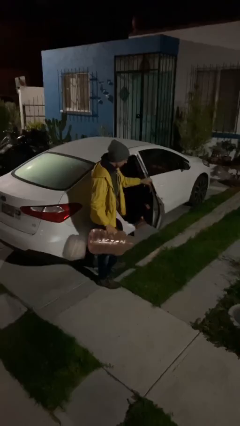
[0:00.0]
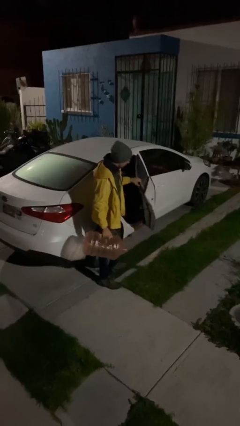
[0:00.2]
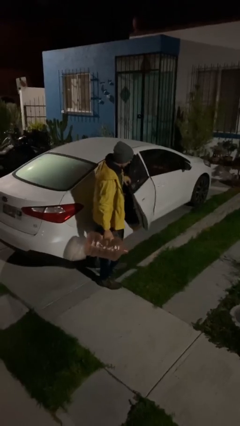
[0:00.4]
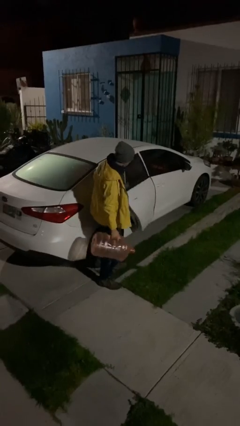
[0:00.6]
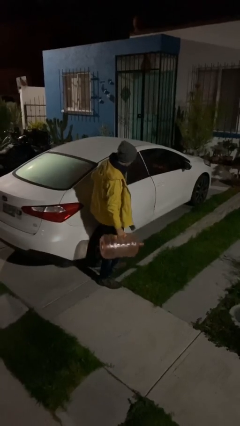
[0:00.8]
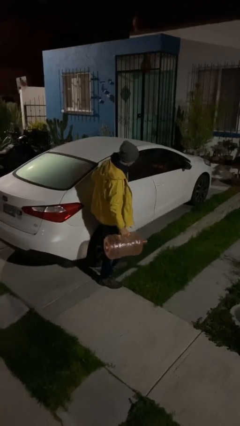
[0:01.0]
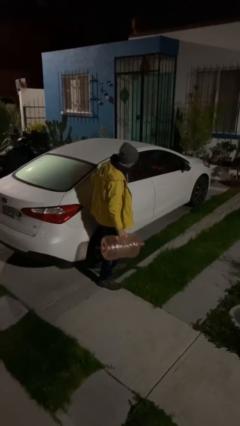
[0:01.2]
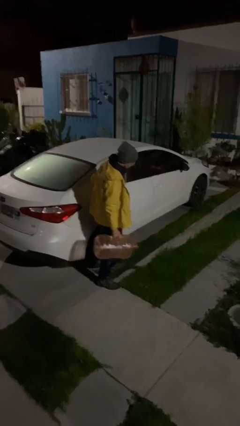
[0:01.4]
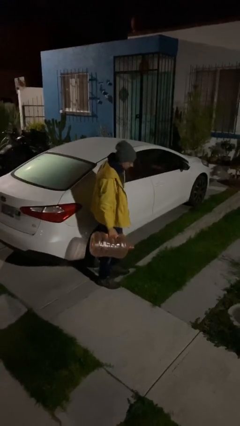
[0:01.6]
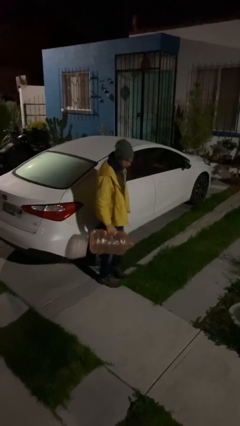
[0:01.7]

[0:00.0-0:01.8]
person closes car door

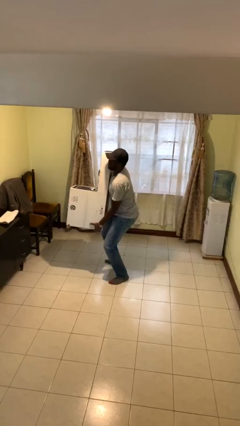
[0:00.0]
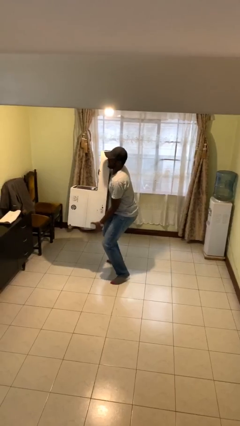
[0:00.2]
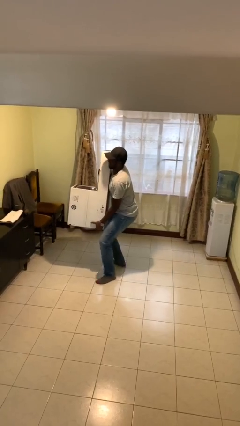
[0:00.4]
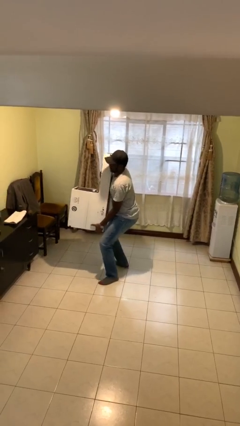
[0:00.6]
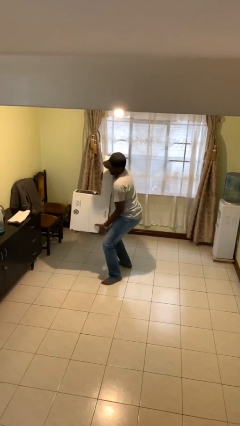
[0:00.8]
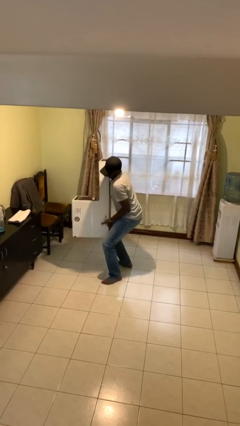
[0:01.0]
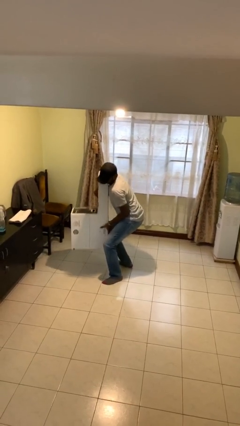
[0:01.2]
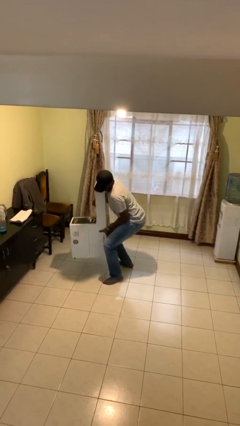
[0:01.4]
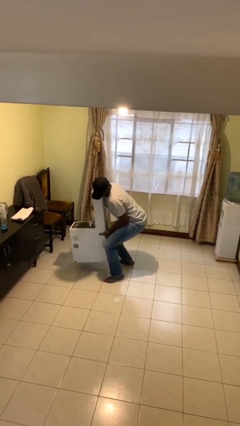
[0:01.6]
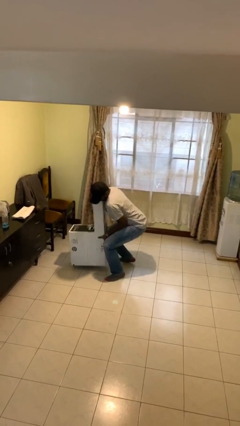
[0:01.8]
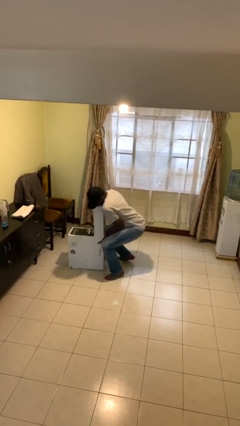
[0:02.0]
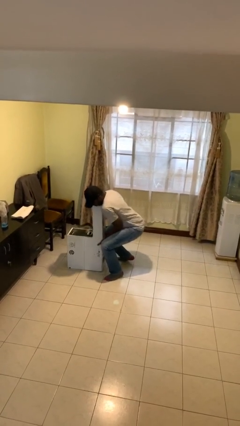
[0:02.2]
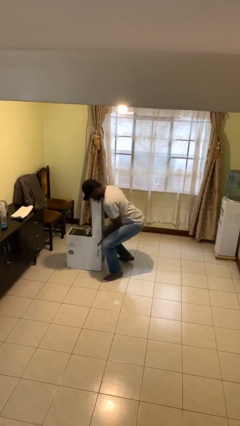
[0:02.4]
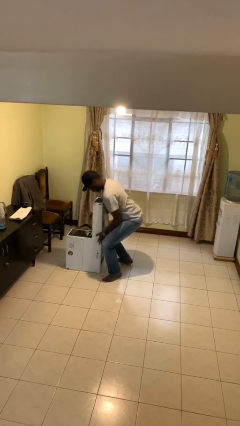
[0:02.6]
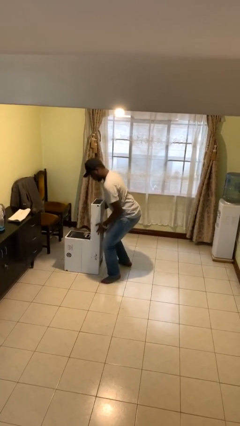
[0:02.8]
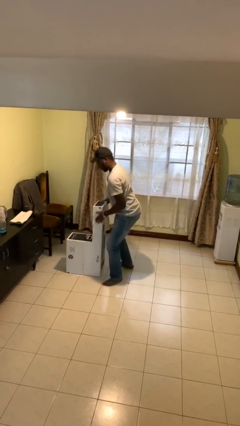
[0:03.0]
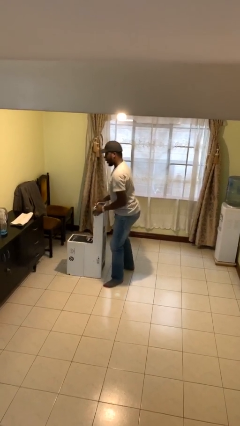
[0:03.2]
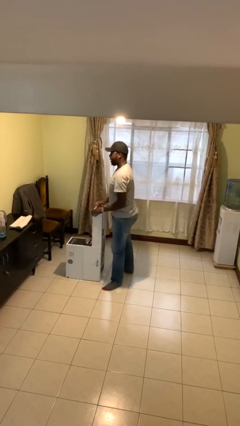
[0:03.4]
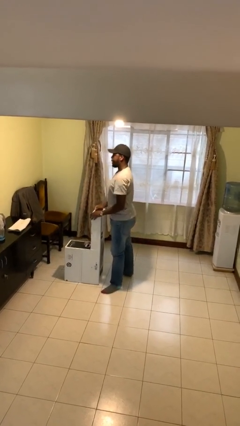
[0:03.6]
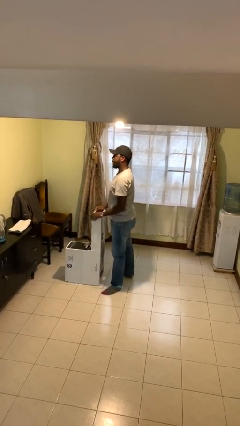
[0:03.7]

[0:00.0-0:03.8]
person puts down object on floor

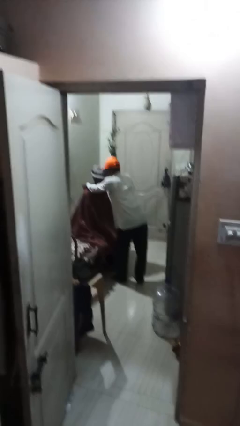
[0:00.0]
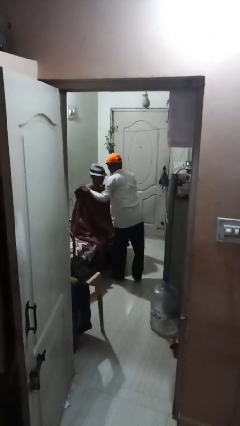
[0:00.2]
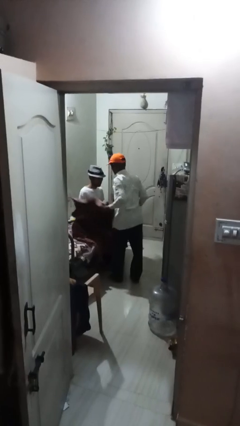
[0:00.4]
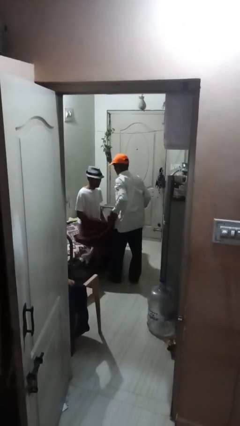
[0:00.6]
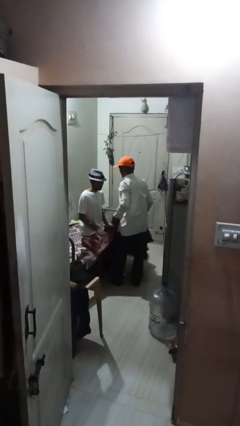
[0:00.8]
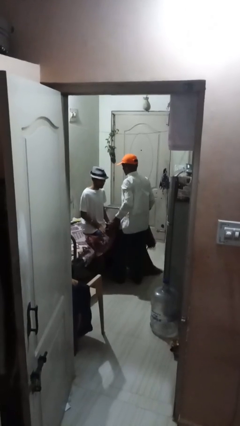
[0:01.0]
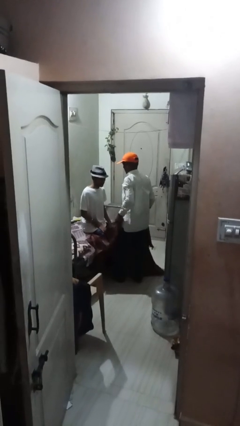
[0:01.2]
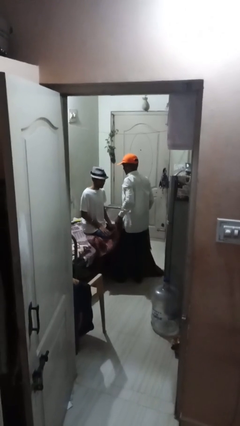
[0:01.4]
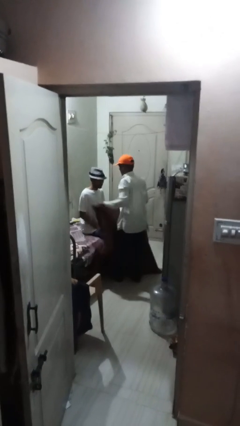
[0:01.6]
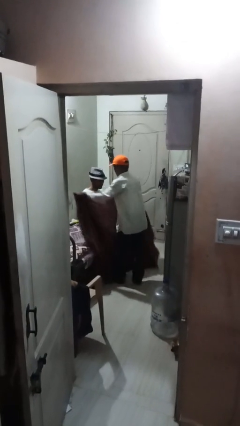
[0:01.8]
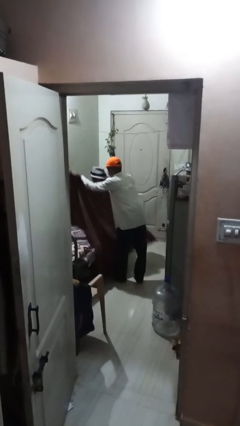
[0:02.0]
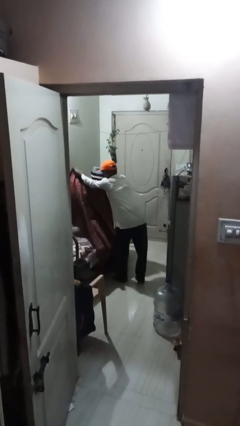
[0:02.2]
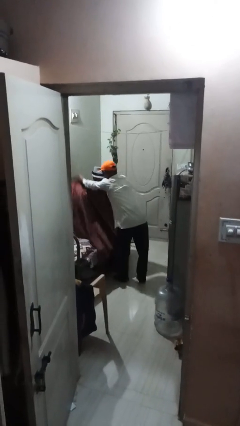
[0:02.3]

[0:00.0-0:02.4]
person uncovers friend with blanket

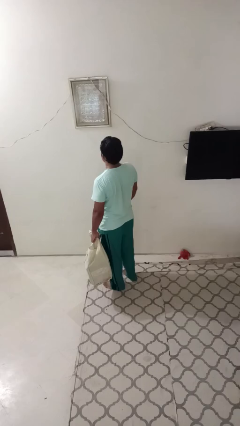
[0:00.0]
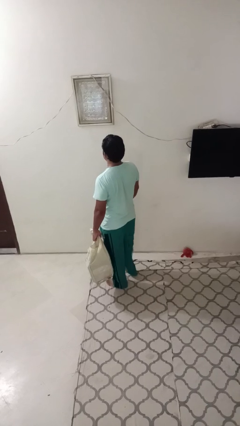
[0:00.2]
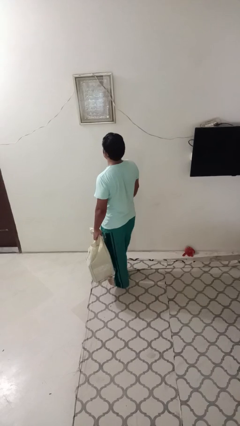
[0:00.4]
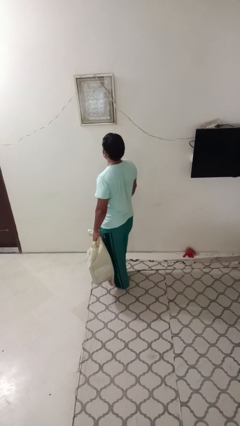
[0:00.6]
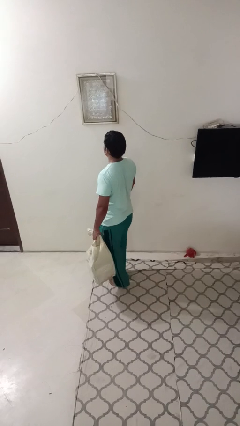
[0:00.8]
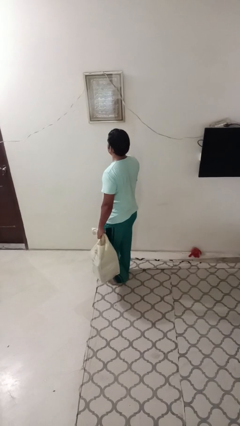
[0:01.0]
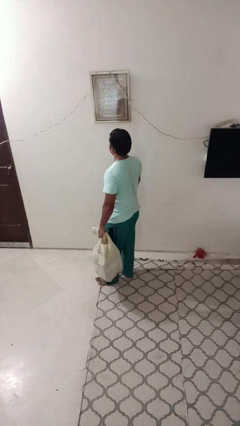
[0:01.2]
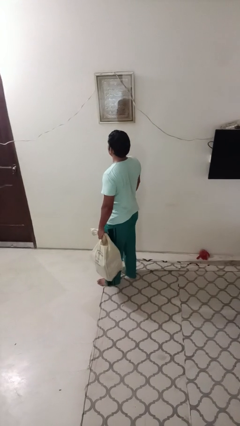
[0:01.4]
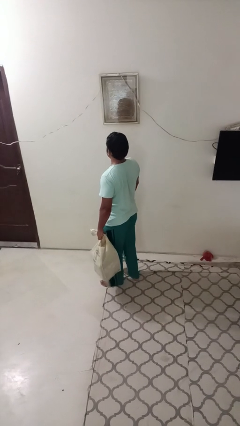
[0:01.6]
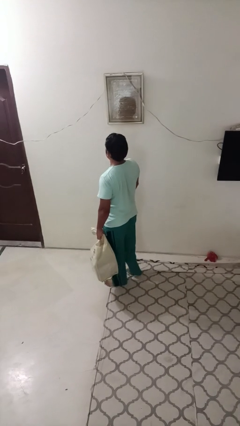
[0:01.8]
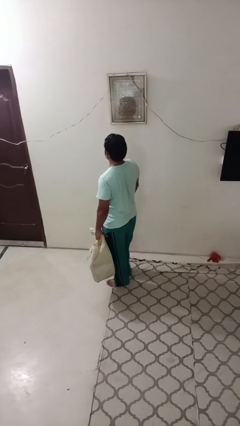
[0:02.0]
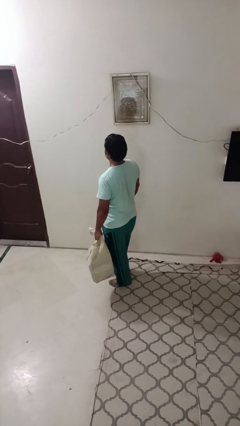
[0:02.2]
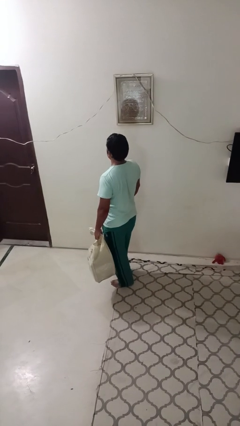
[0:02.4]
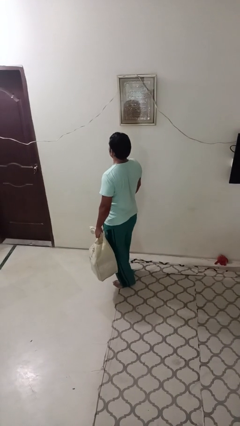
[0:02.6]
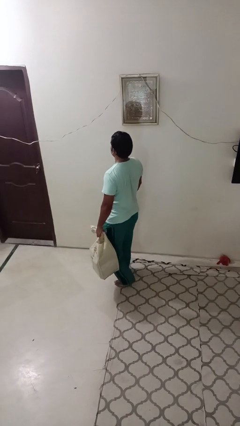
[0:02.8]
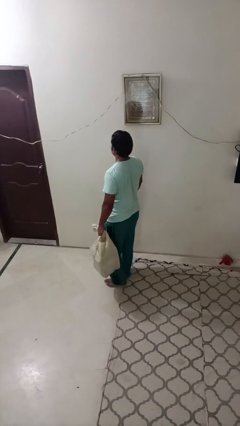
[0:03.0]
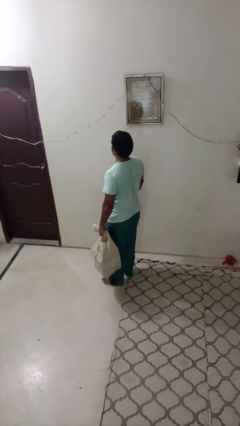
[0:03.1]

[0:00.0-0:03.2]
person carries groceries

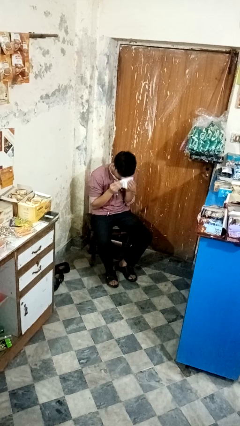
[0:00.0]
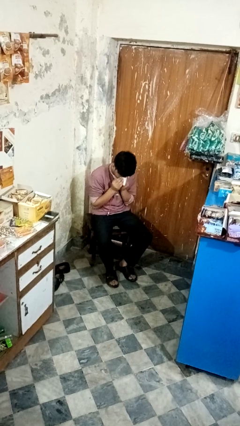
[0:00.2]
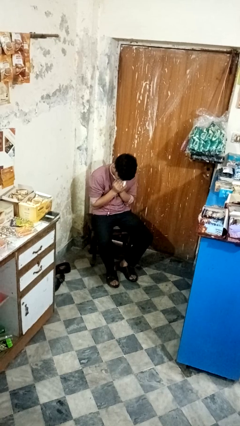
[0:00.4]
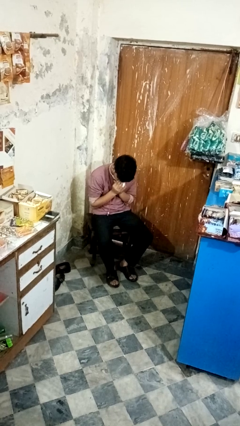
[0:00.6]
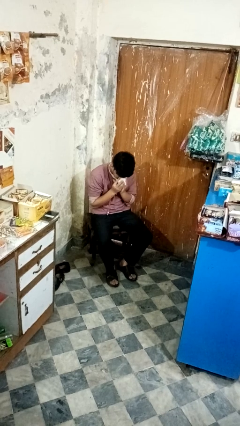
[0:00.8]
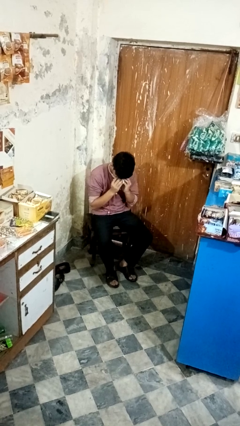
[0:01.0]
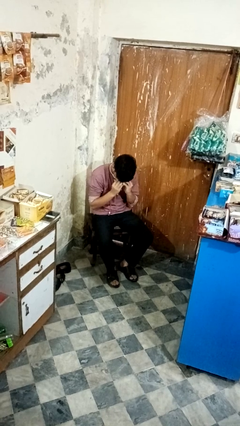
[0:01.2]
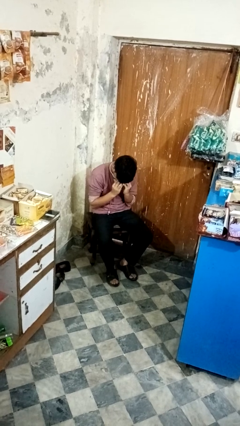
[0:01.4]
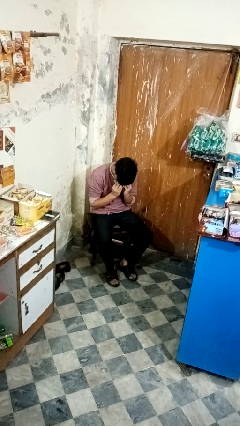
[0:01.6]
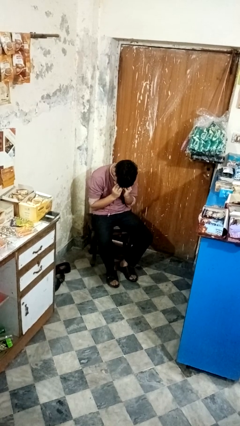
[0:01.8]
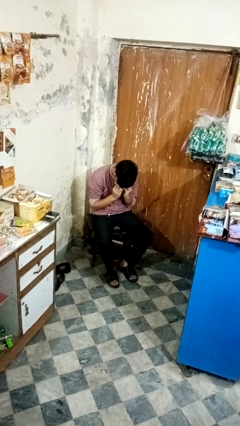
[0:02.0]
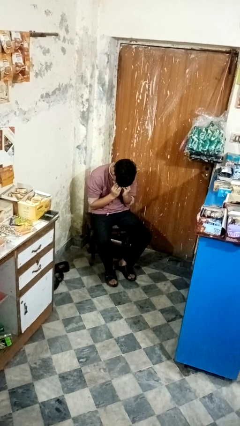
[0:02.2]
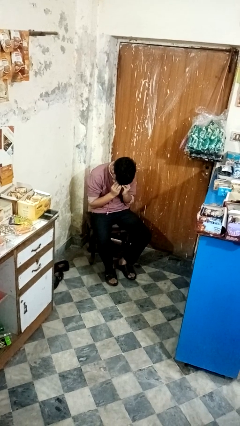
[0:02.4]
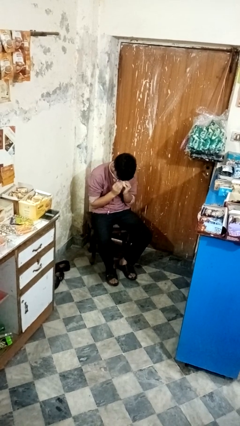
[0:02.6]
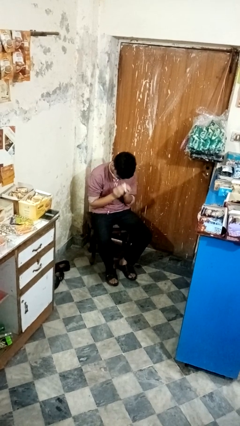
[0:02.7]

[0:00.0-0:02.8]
person blows nose

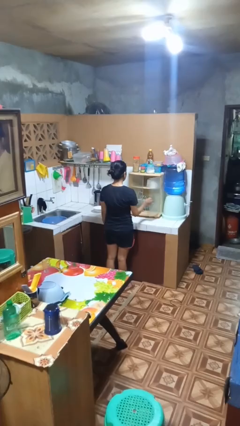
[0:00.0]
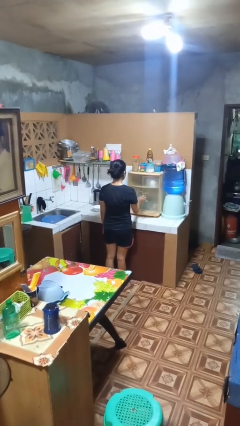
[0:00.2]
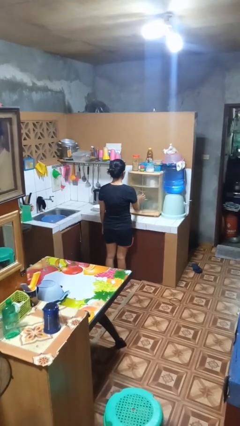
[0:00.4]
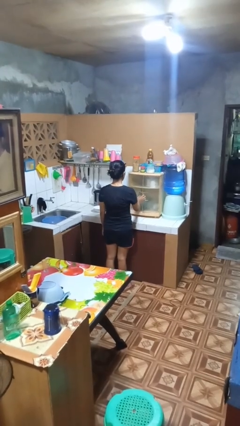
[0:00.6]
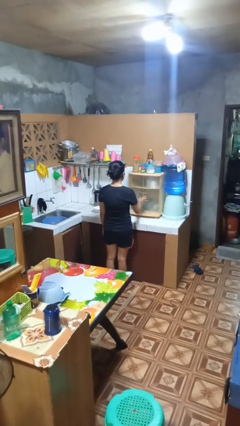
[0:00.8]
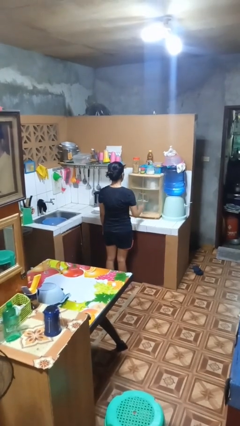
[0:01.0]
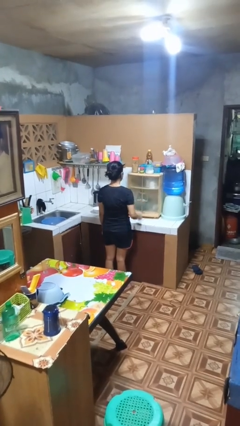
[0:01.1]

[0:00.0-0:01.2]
person closes kitchen drawer

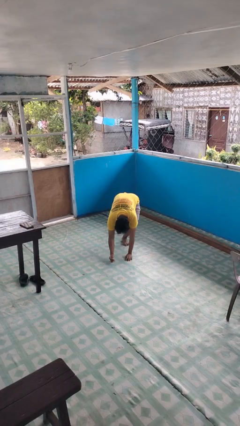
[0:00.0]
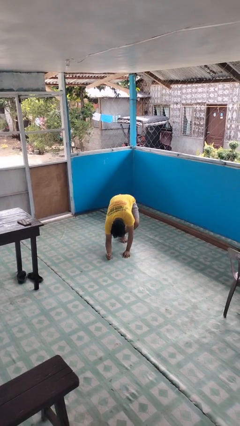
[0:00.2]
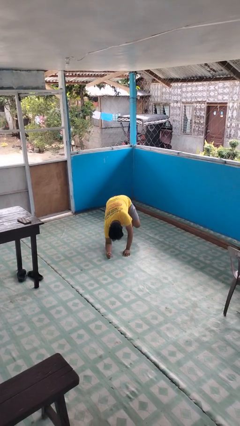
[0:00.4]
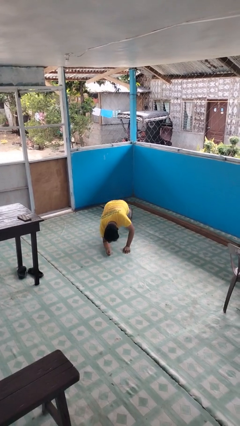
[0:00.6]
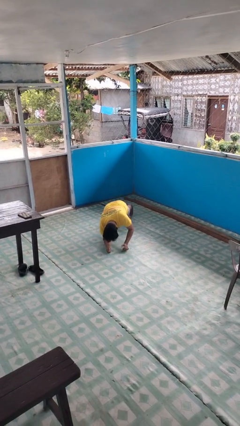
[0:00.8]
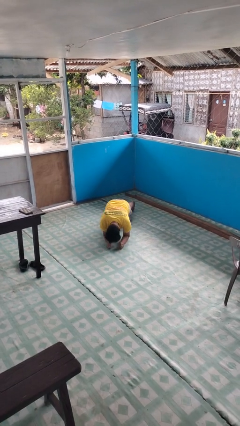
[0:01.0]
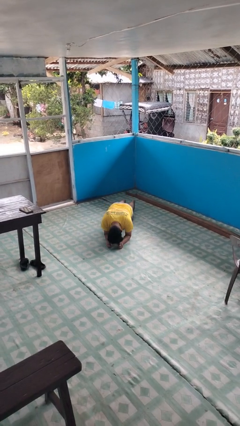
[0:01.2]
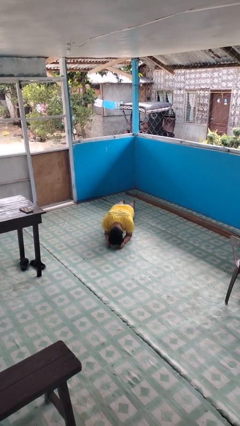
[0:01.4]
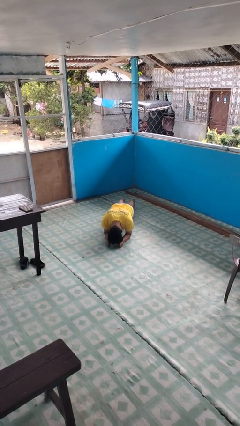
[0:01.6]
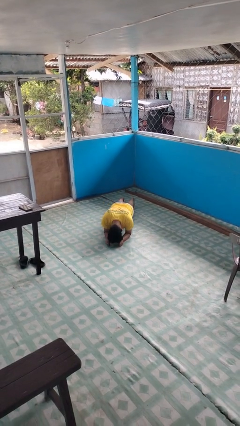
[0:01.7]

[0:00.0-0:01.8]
person exercises with plank
